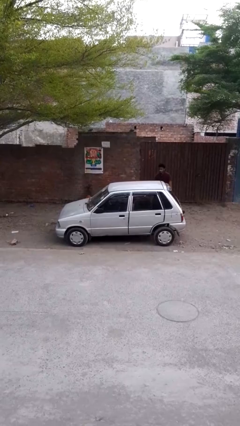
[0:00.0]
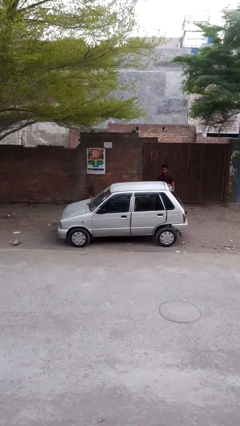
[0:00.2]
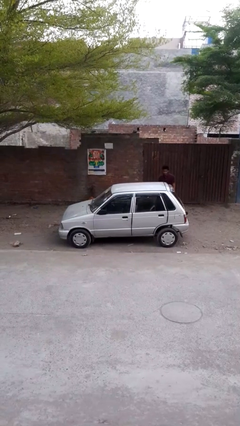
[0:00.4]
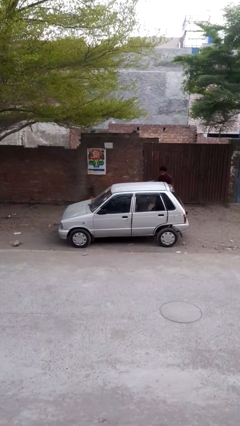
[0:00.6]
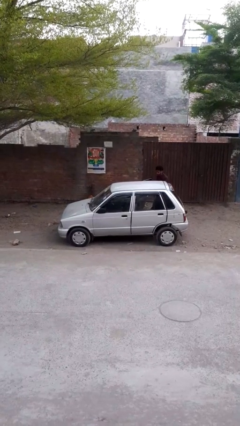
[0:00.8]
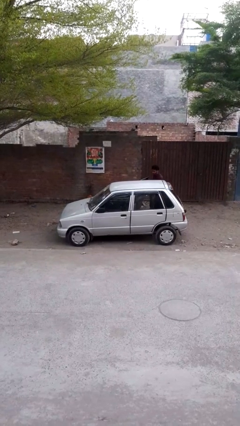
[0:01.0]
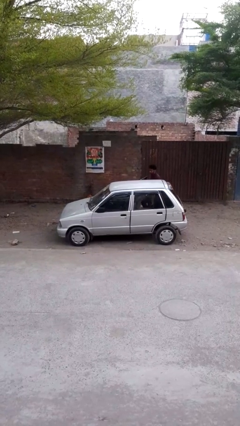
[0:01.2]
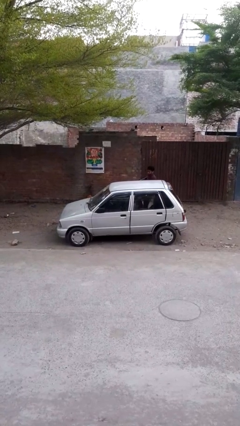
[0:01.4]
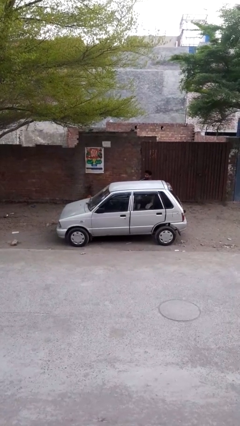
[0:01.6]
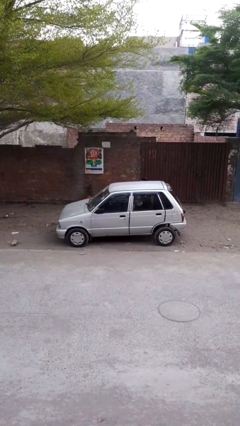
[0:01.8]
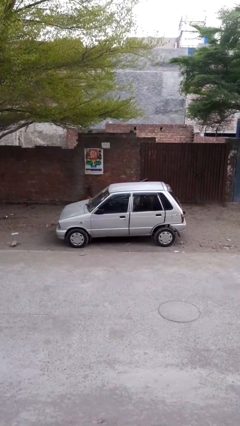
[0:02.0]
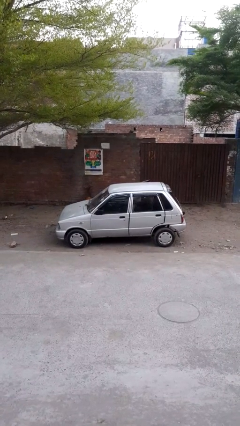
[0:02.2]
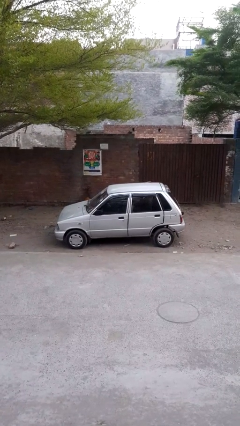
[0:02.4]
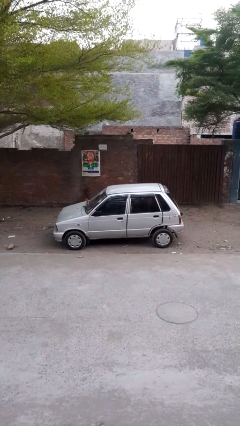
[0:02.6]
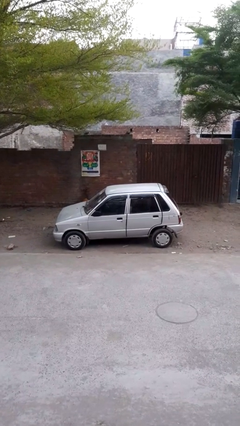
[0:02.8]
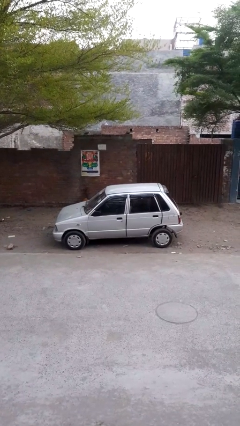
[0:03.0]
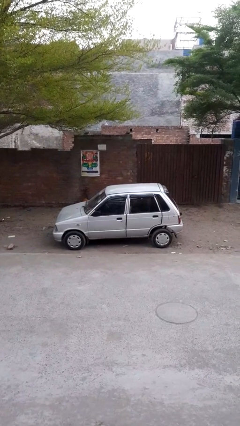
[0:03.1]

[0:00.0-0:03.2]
car picks up person

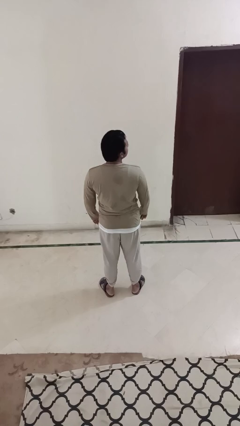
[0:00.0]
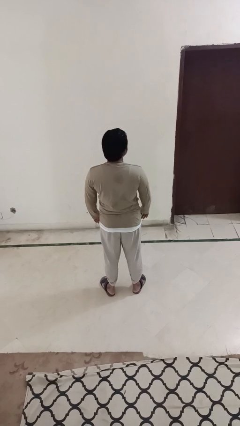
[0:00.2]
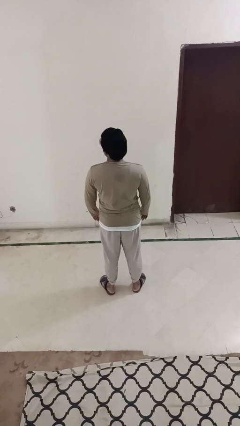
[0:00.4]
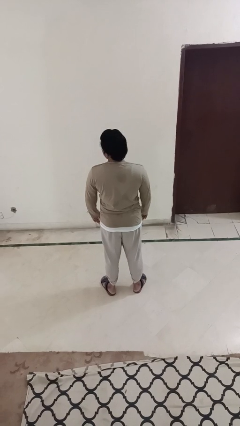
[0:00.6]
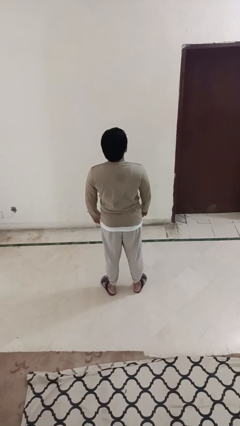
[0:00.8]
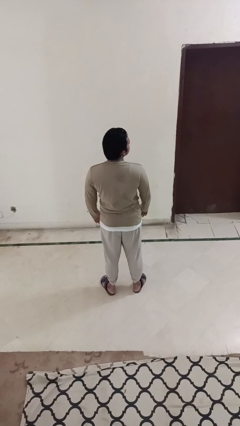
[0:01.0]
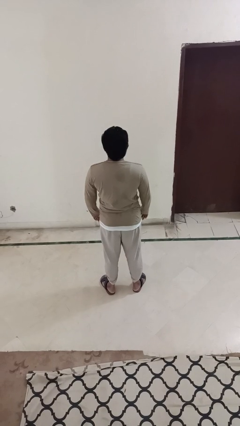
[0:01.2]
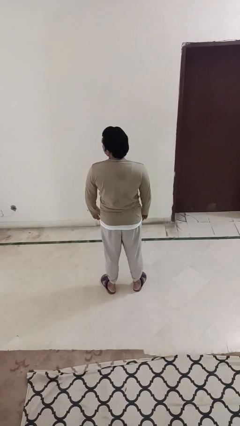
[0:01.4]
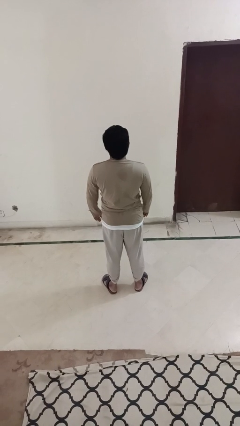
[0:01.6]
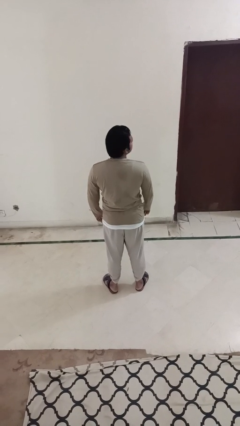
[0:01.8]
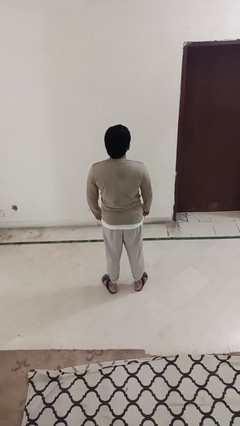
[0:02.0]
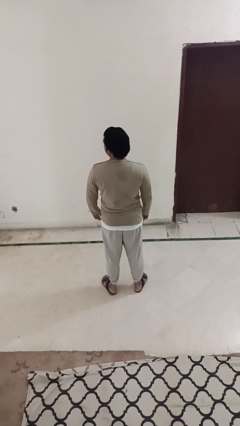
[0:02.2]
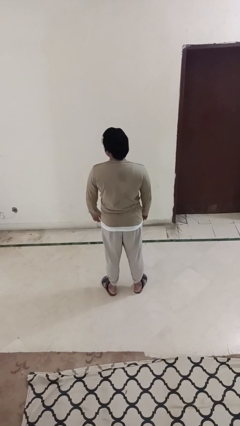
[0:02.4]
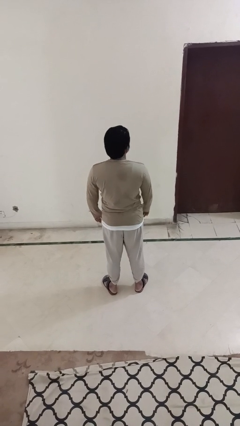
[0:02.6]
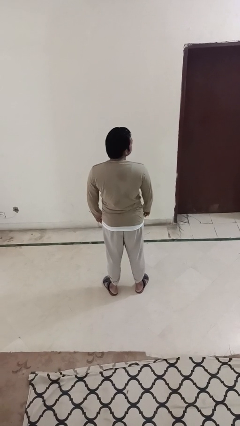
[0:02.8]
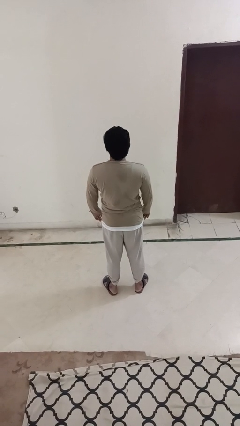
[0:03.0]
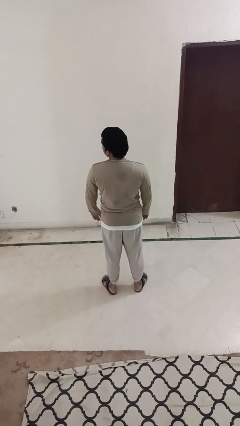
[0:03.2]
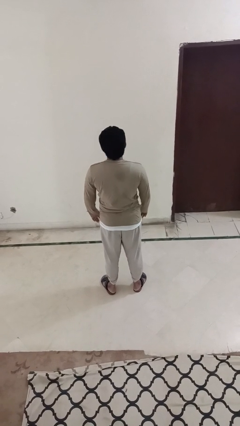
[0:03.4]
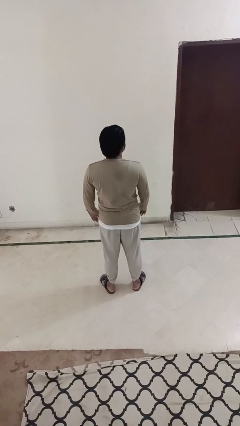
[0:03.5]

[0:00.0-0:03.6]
person shakes head

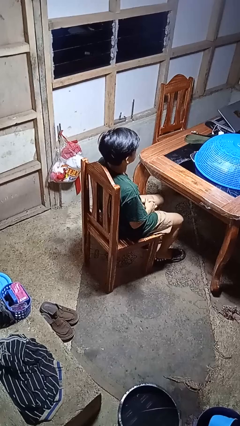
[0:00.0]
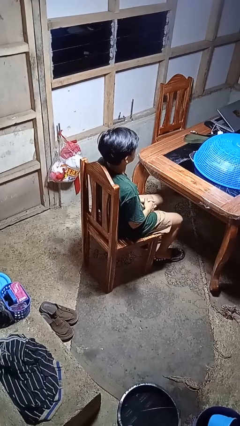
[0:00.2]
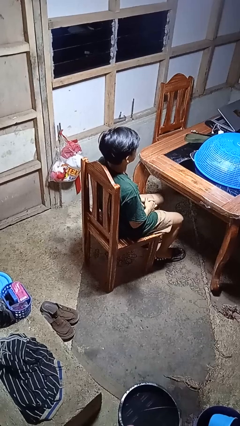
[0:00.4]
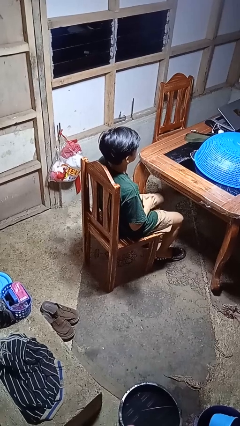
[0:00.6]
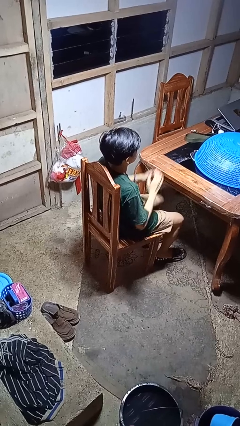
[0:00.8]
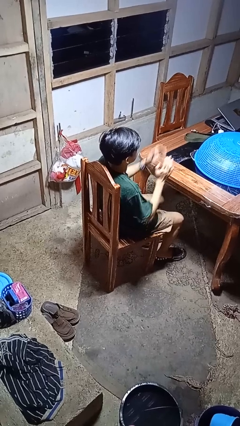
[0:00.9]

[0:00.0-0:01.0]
person claps hands

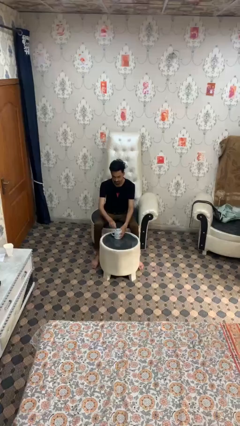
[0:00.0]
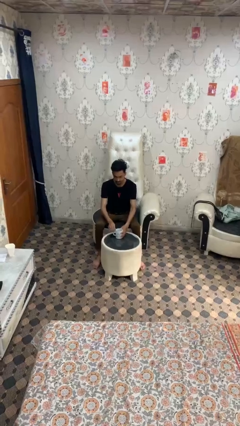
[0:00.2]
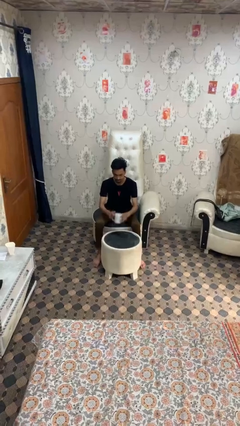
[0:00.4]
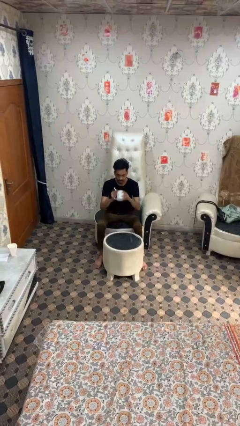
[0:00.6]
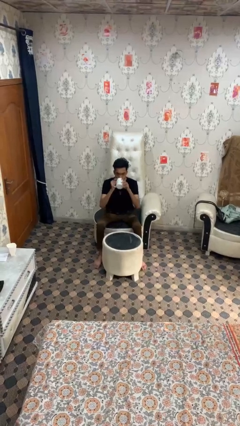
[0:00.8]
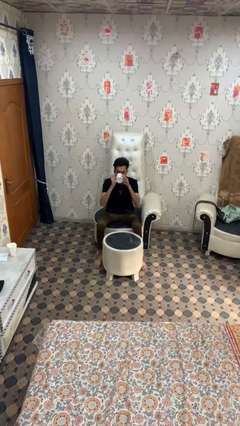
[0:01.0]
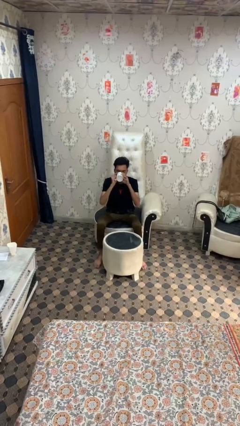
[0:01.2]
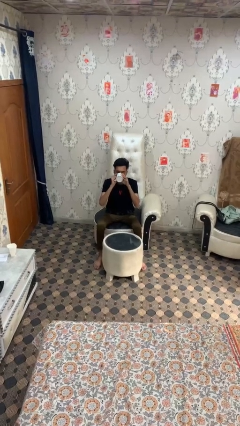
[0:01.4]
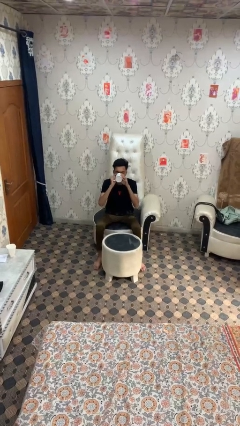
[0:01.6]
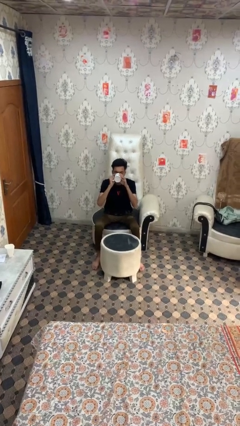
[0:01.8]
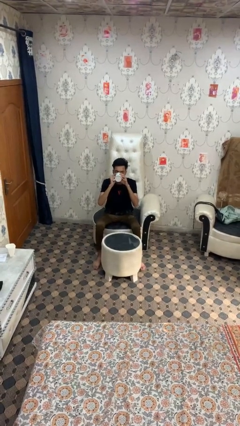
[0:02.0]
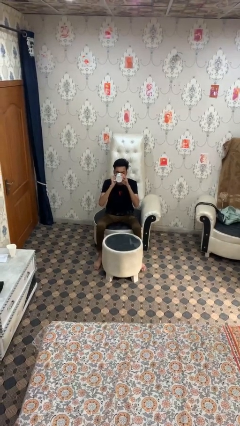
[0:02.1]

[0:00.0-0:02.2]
person drinks from mug

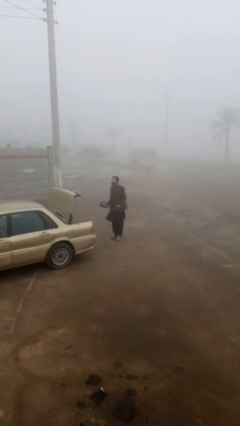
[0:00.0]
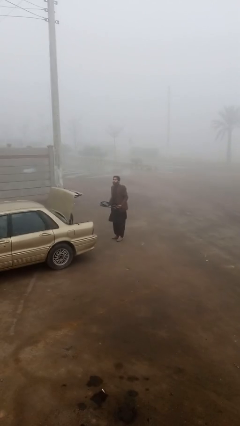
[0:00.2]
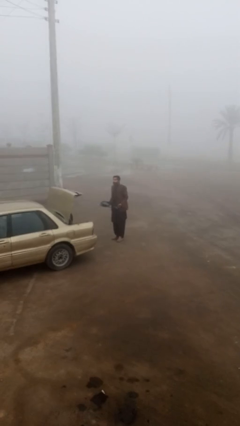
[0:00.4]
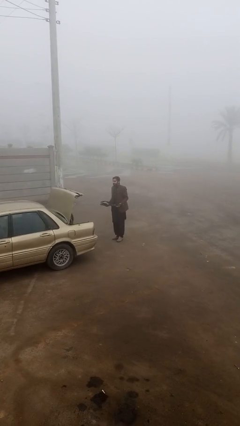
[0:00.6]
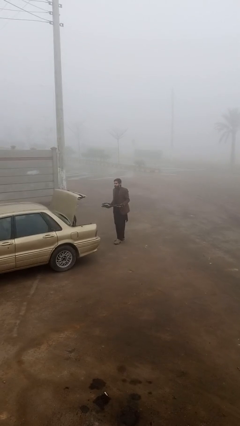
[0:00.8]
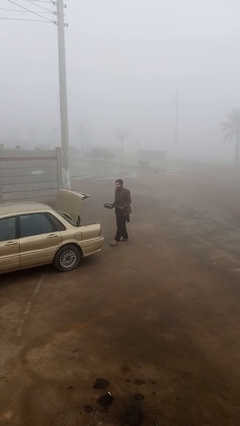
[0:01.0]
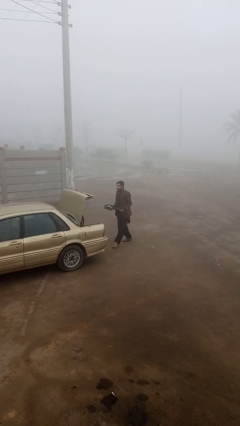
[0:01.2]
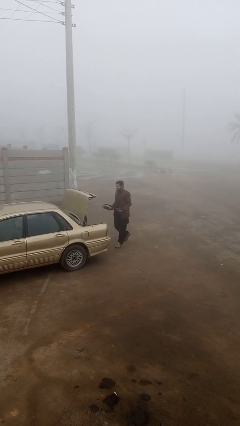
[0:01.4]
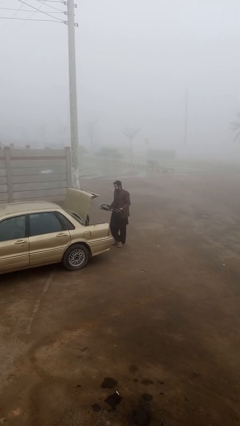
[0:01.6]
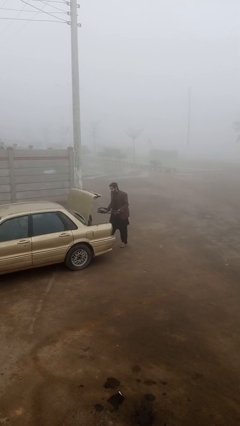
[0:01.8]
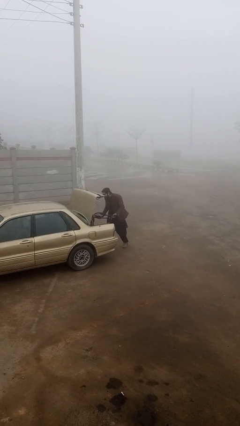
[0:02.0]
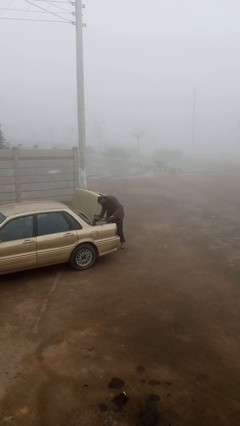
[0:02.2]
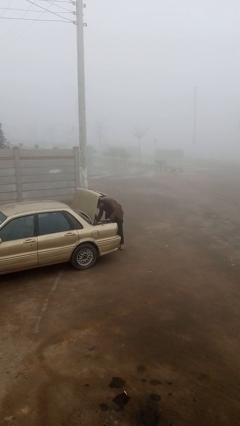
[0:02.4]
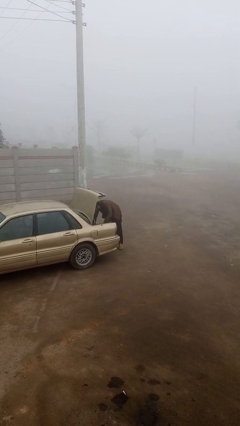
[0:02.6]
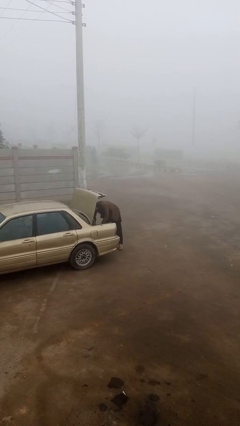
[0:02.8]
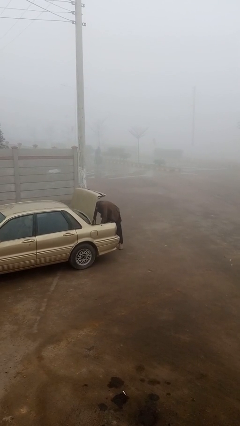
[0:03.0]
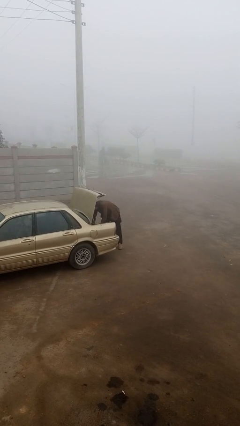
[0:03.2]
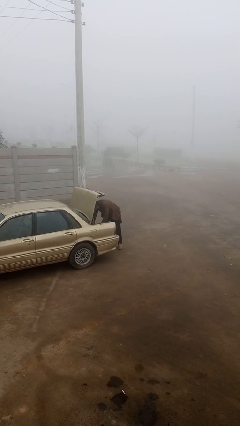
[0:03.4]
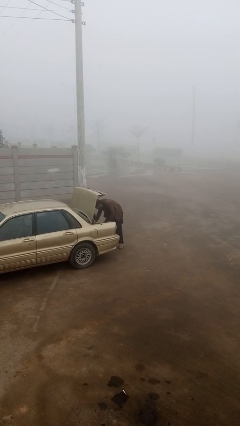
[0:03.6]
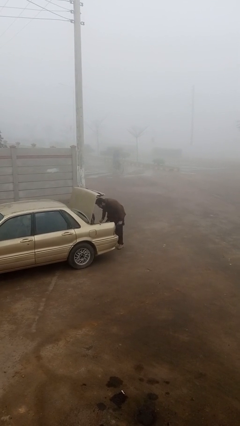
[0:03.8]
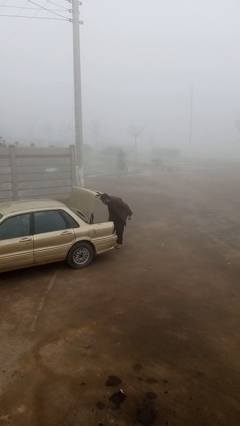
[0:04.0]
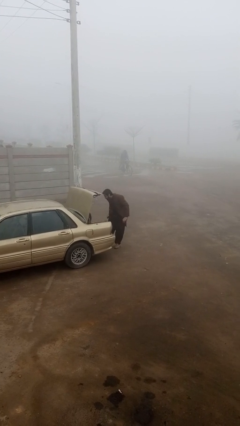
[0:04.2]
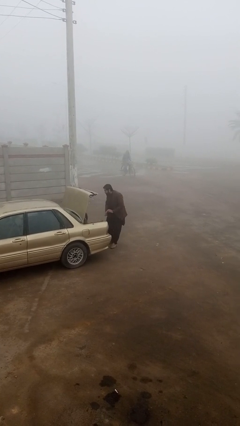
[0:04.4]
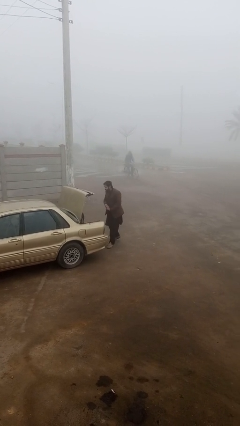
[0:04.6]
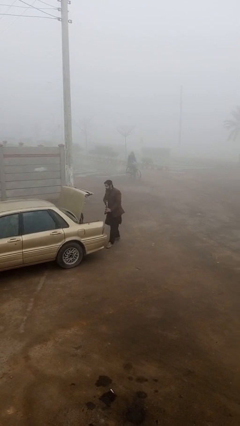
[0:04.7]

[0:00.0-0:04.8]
person loads car

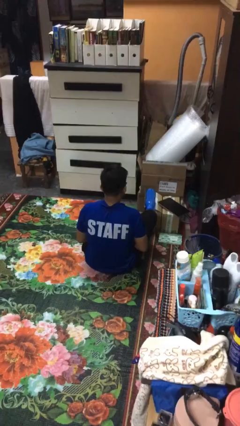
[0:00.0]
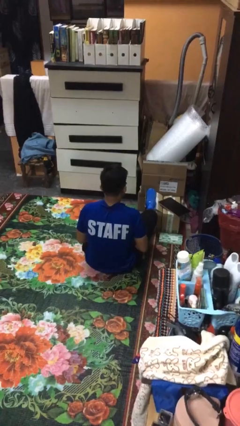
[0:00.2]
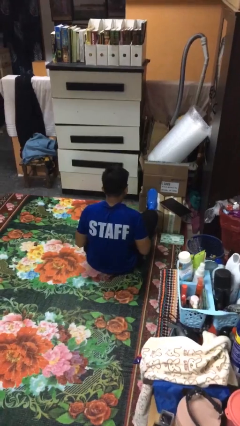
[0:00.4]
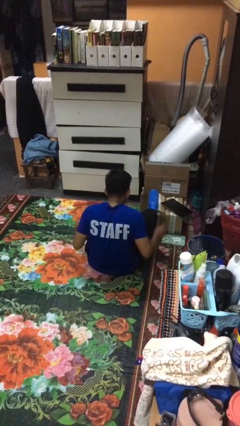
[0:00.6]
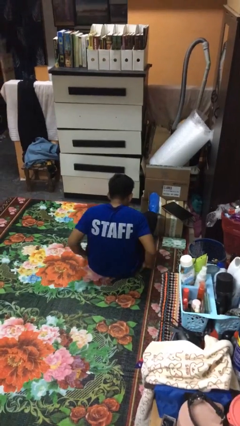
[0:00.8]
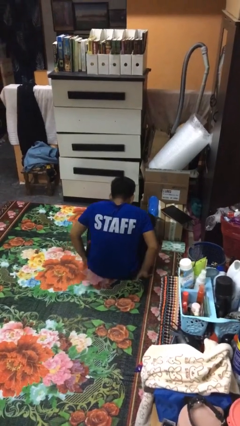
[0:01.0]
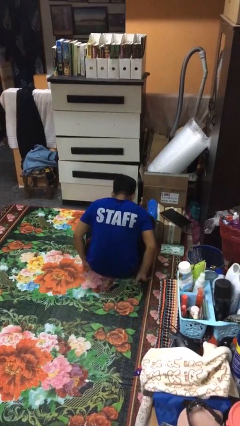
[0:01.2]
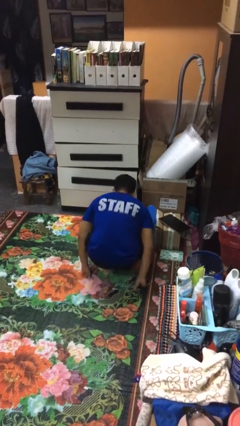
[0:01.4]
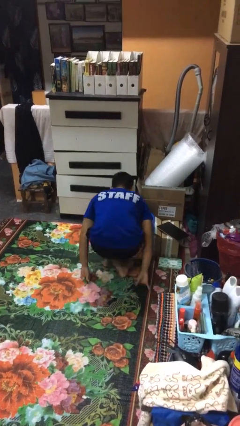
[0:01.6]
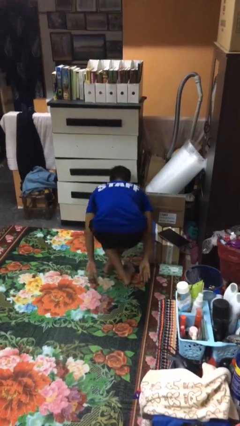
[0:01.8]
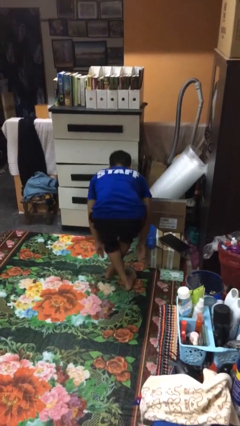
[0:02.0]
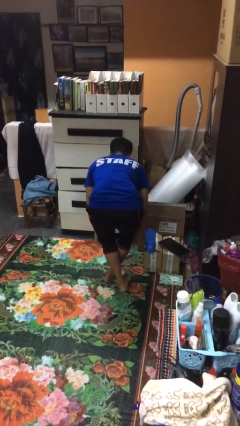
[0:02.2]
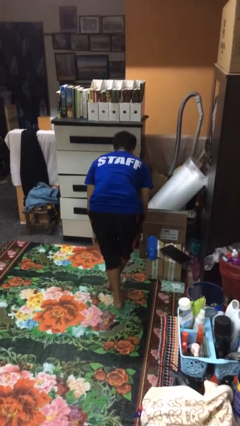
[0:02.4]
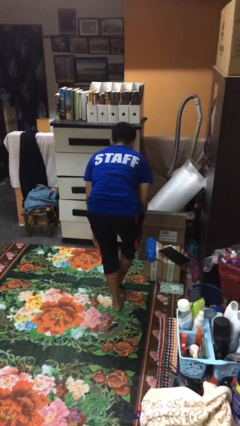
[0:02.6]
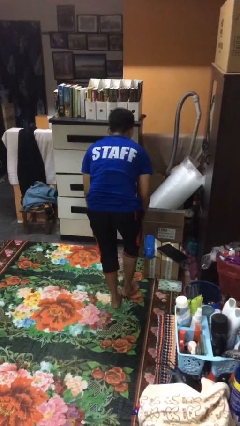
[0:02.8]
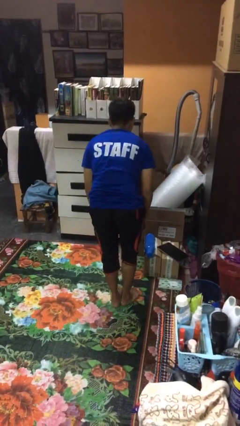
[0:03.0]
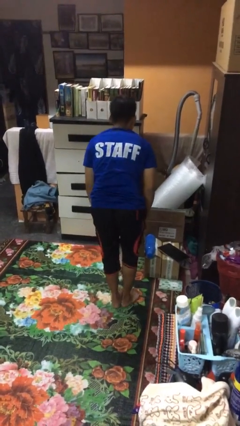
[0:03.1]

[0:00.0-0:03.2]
person stands up from floor
